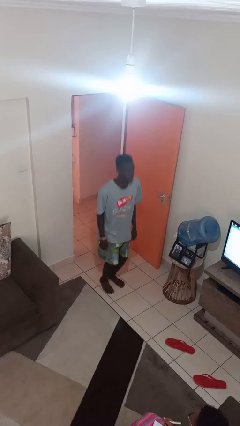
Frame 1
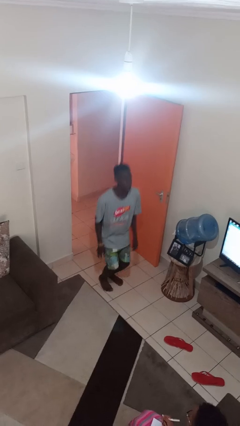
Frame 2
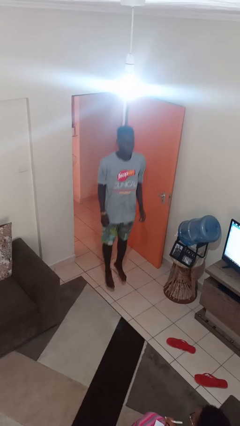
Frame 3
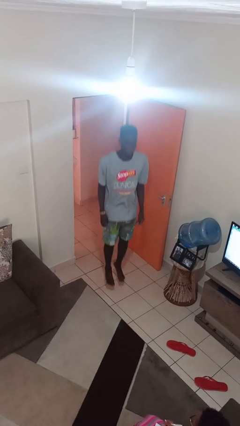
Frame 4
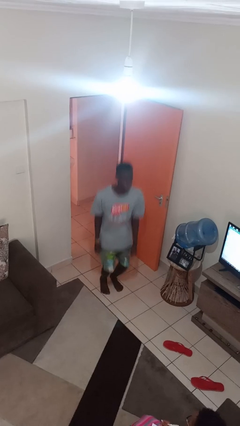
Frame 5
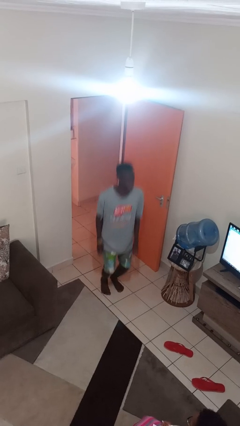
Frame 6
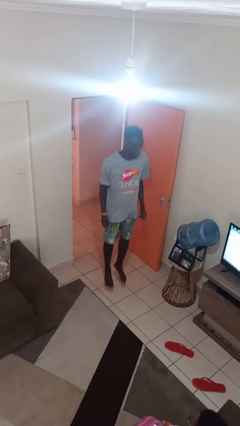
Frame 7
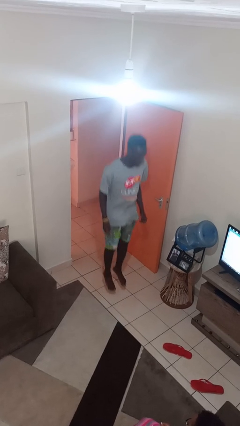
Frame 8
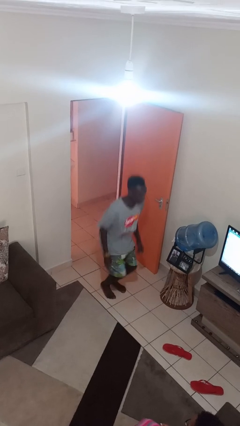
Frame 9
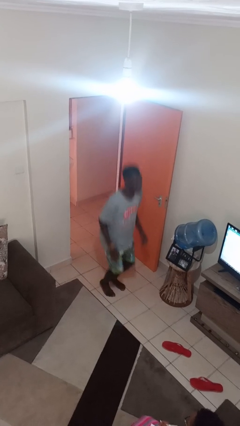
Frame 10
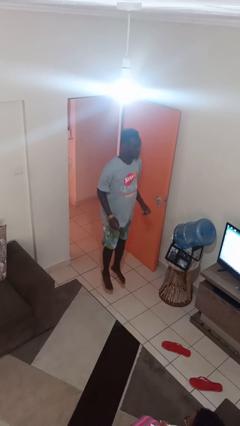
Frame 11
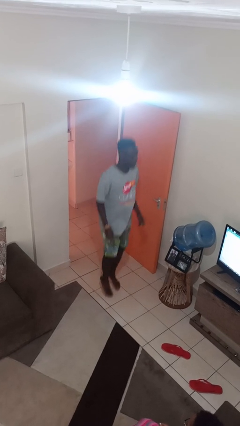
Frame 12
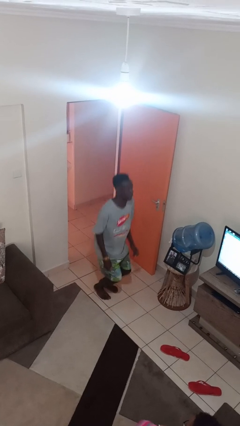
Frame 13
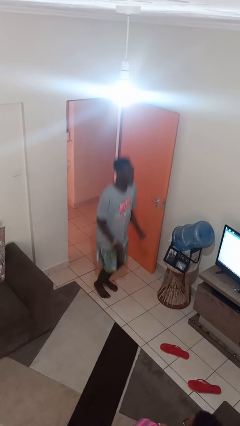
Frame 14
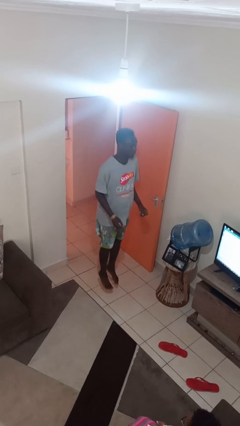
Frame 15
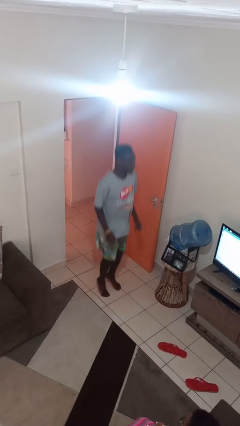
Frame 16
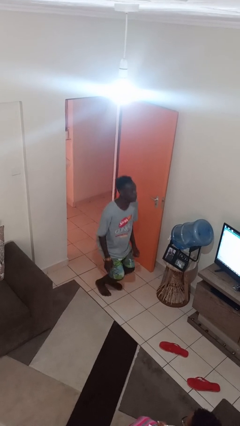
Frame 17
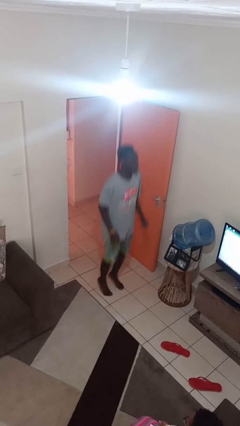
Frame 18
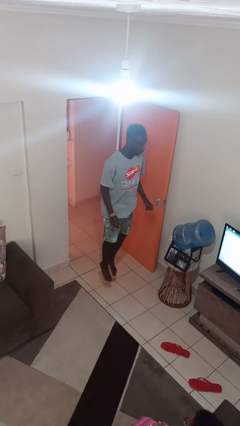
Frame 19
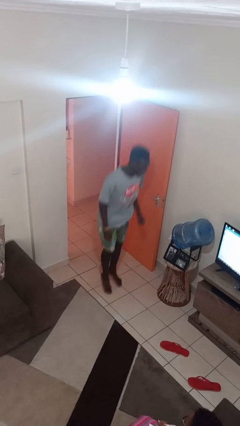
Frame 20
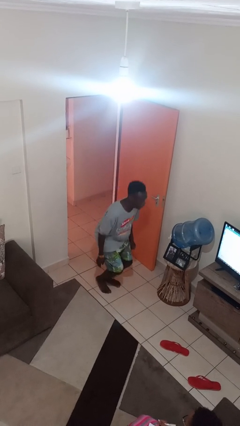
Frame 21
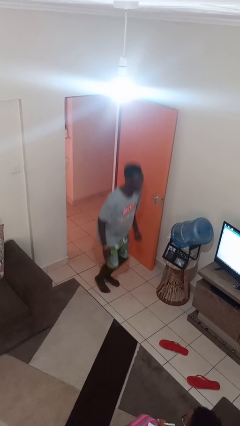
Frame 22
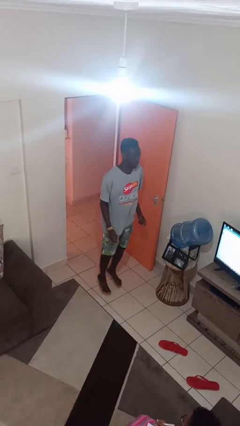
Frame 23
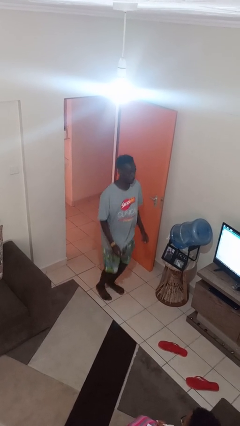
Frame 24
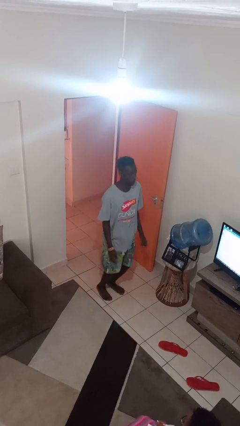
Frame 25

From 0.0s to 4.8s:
person jumps

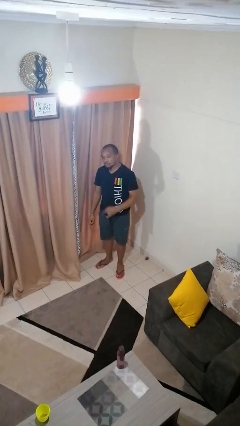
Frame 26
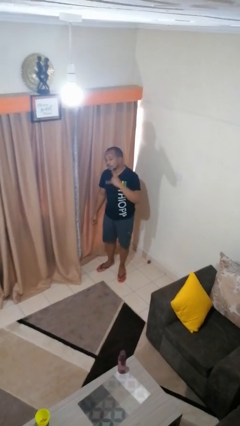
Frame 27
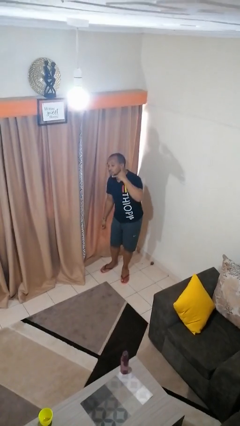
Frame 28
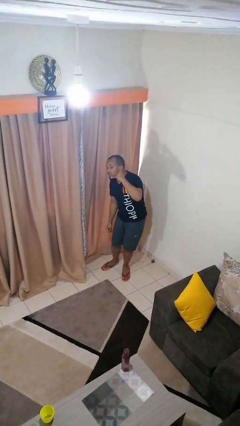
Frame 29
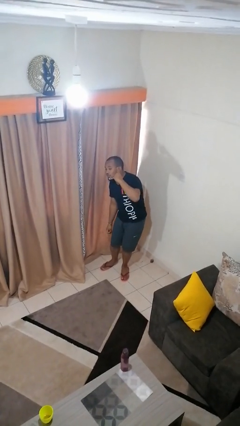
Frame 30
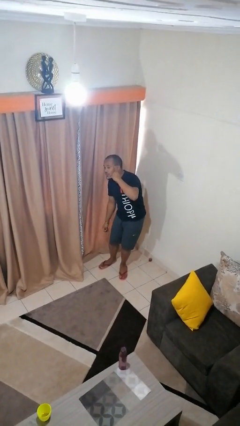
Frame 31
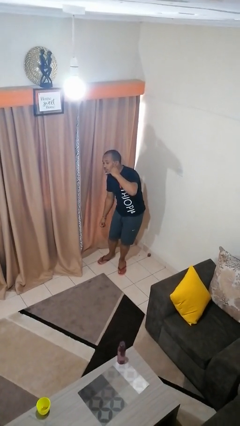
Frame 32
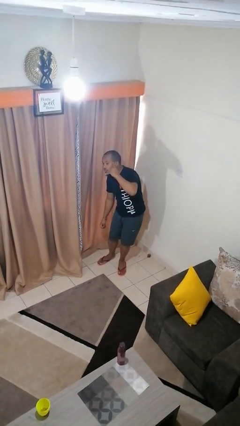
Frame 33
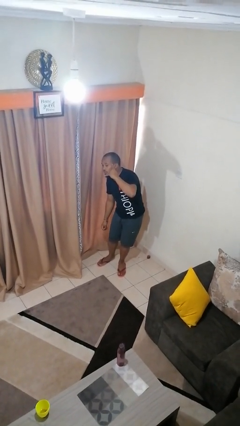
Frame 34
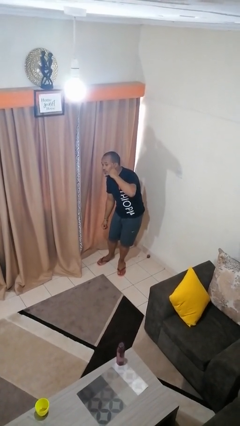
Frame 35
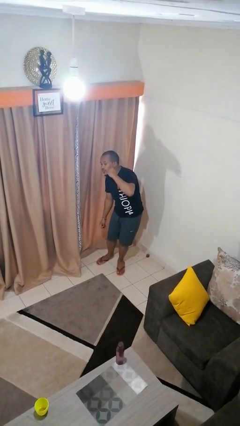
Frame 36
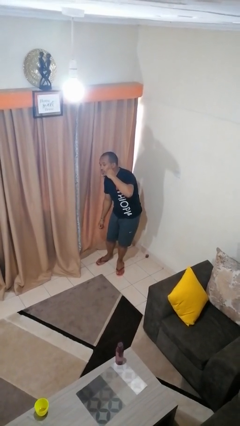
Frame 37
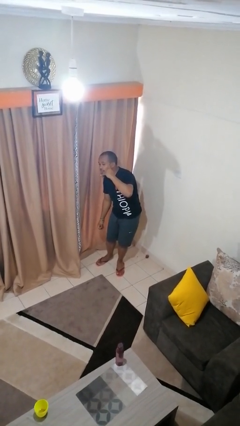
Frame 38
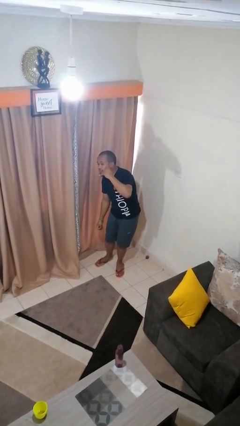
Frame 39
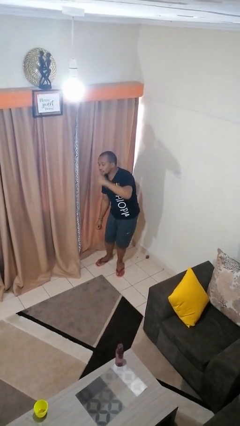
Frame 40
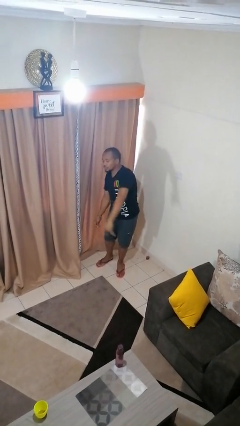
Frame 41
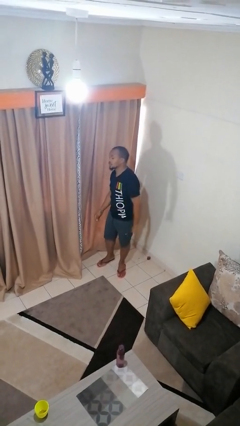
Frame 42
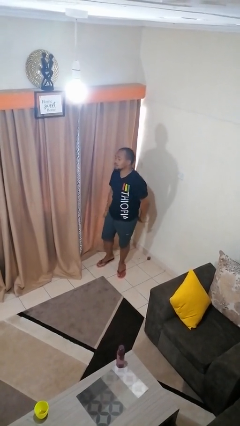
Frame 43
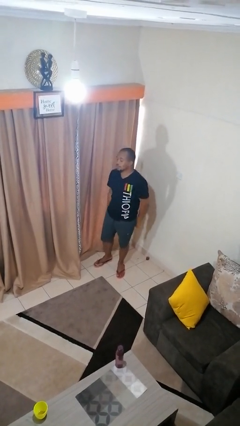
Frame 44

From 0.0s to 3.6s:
person gestures call me

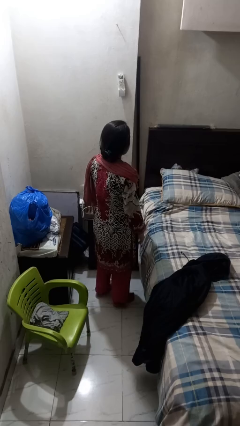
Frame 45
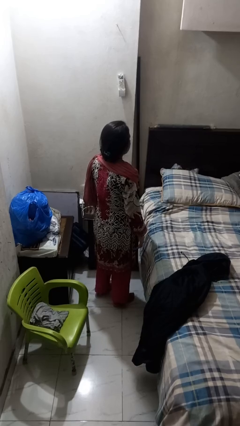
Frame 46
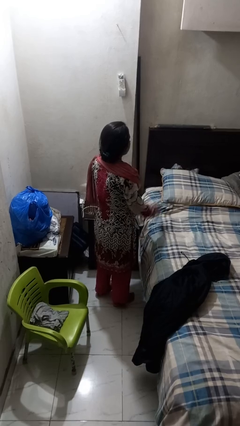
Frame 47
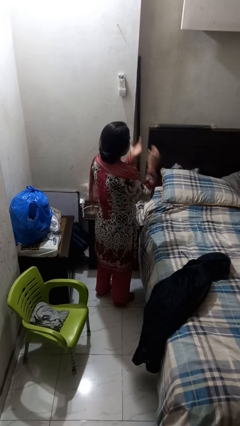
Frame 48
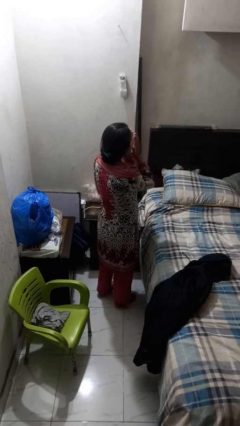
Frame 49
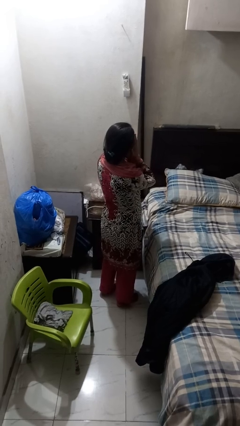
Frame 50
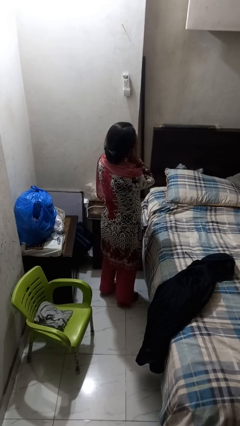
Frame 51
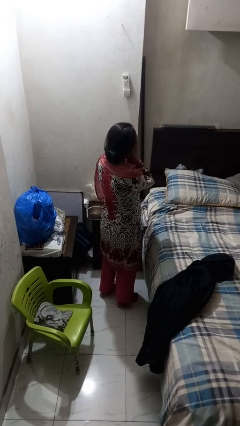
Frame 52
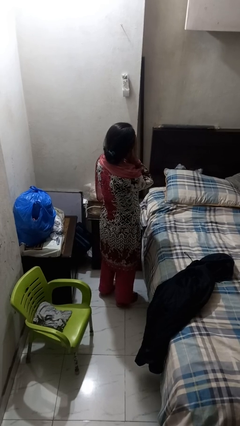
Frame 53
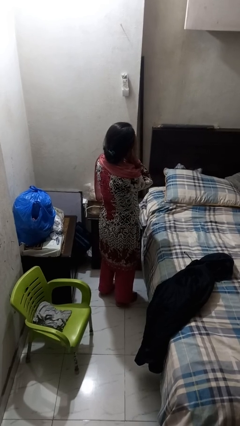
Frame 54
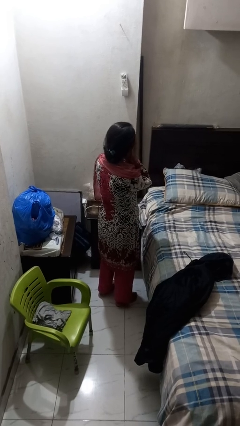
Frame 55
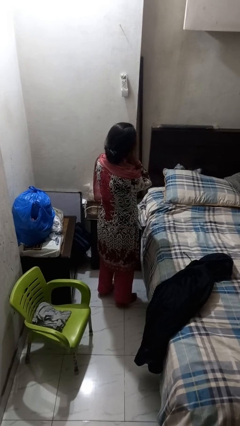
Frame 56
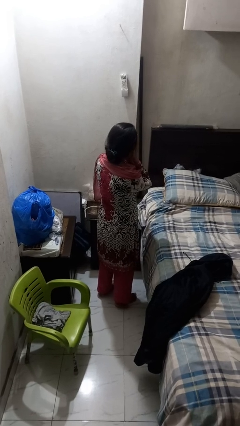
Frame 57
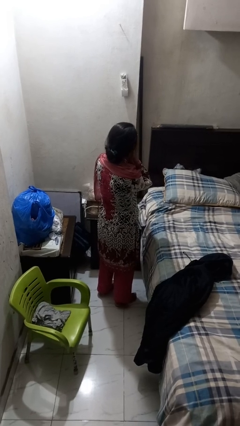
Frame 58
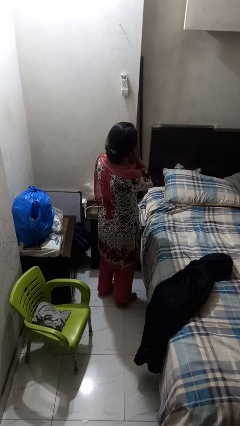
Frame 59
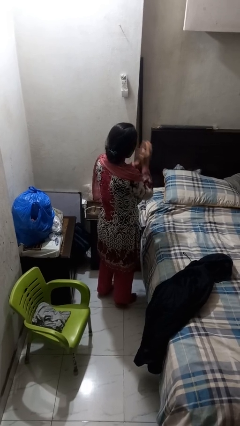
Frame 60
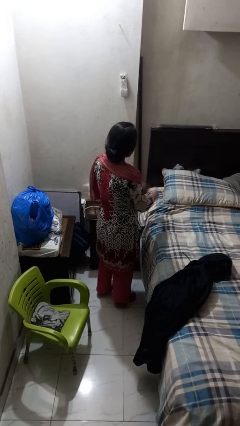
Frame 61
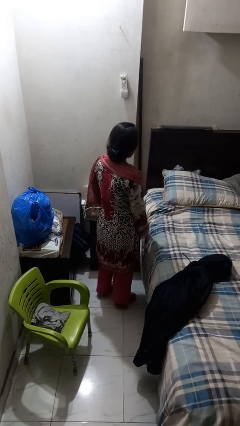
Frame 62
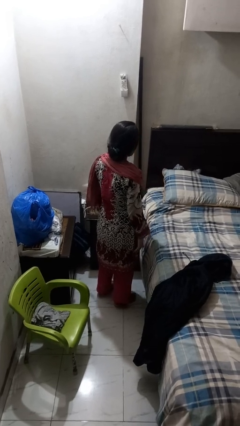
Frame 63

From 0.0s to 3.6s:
person covers face with hands

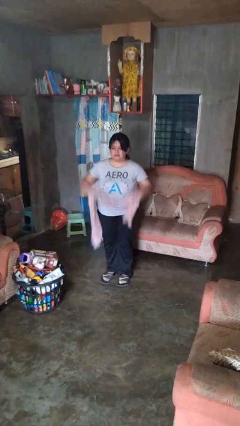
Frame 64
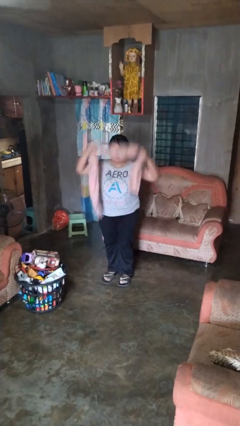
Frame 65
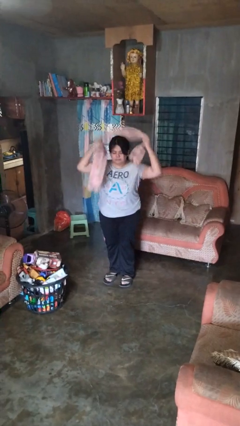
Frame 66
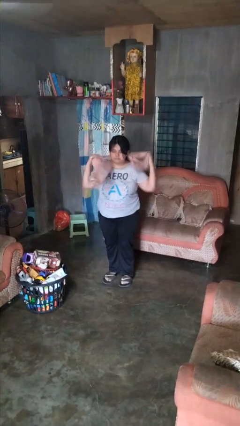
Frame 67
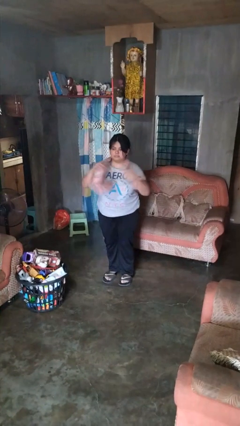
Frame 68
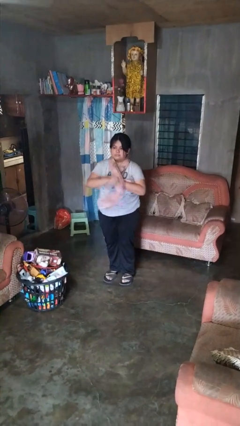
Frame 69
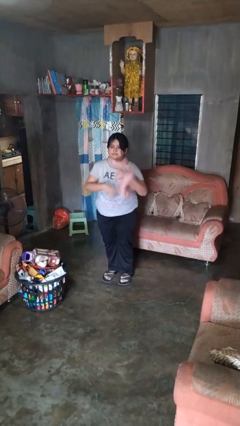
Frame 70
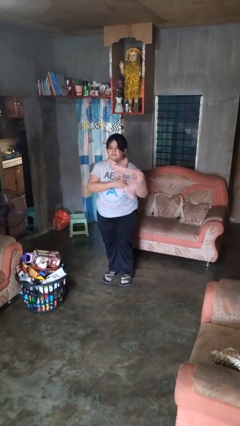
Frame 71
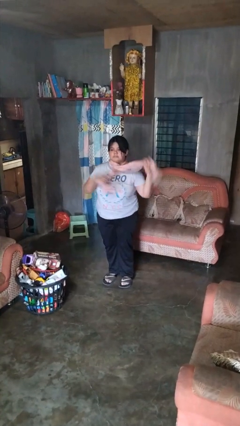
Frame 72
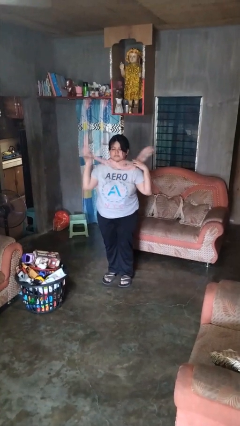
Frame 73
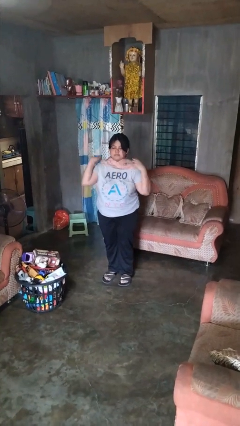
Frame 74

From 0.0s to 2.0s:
person puts on scarf

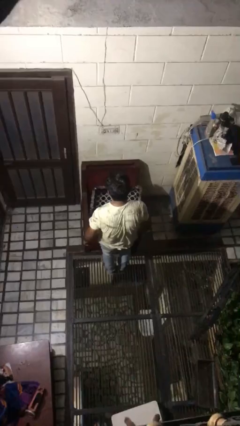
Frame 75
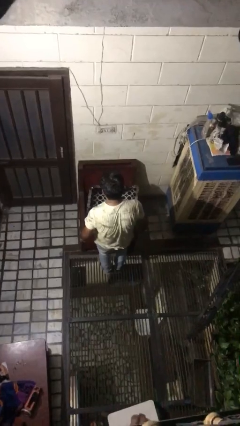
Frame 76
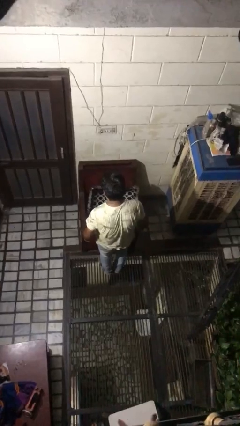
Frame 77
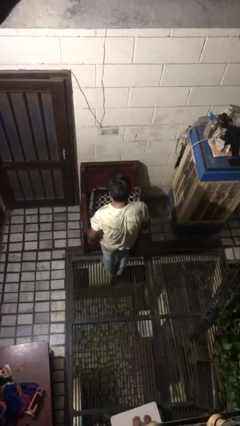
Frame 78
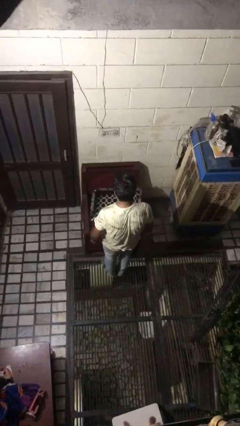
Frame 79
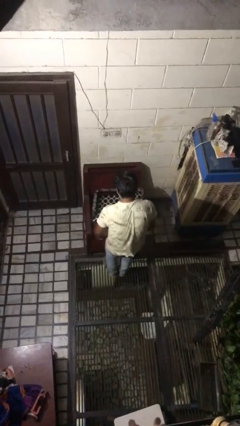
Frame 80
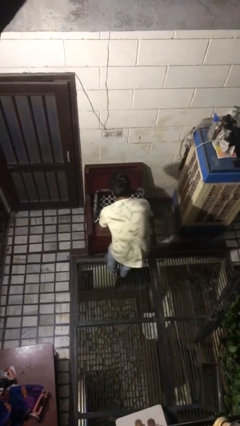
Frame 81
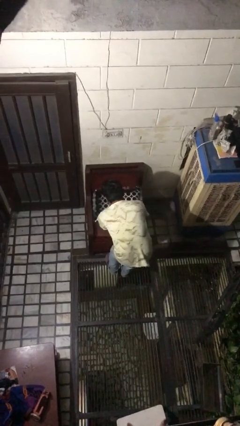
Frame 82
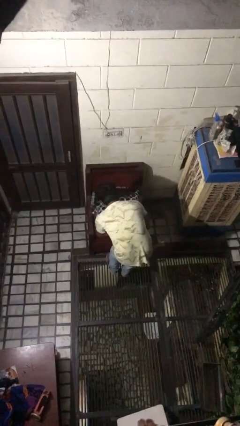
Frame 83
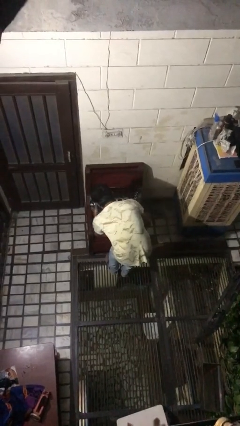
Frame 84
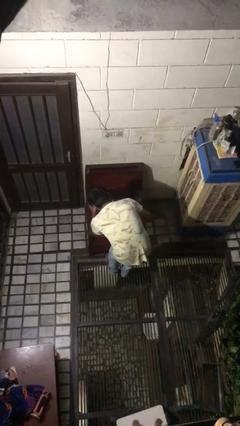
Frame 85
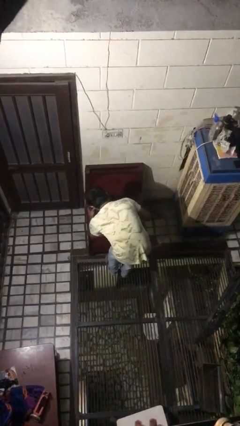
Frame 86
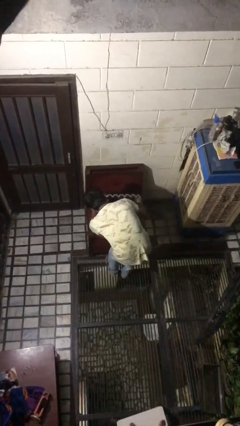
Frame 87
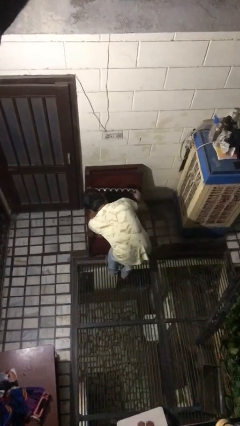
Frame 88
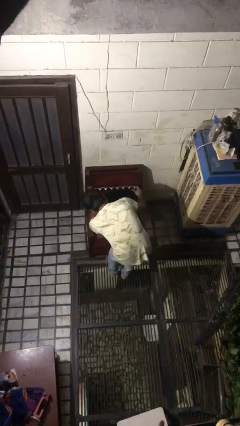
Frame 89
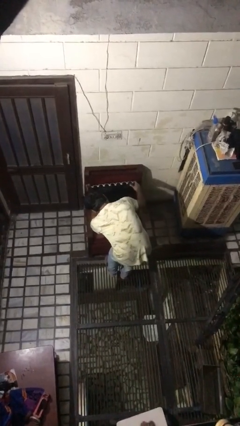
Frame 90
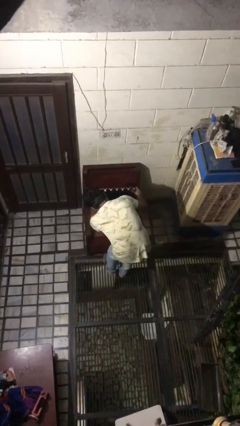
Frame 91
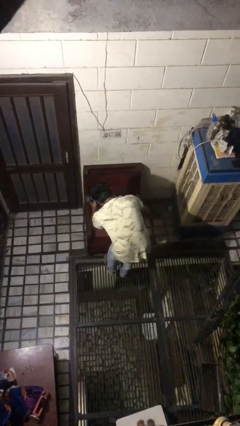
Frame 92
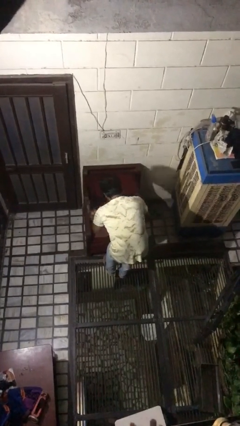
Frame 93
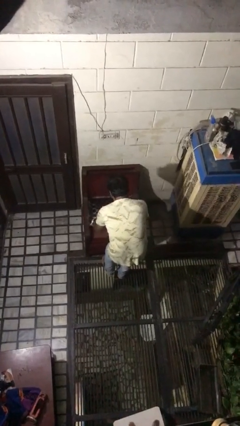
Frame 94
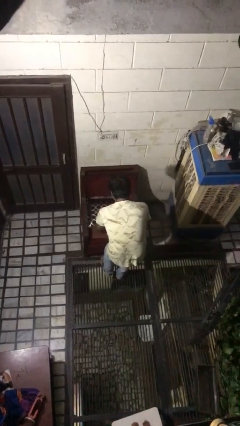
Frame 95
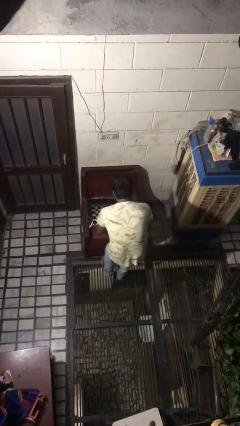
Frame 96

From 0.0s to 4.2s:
person searches in couch
